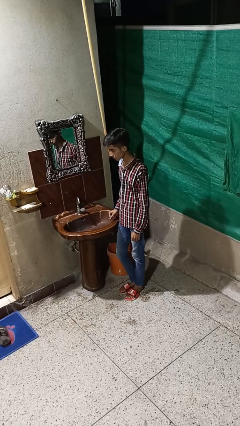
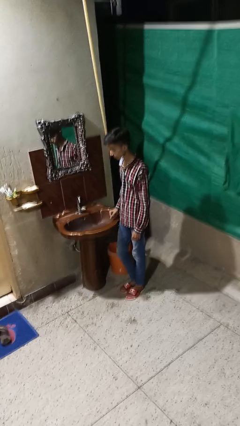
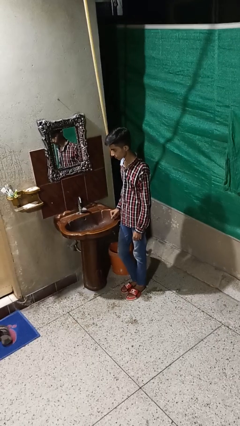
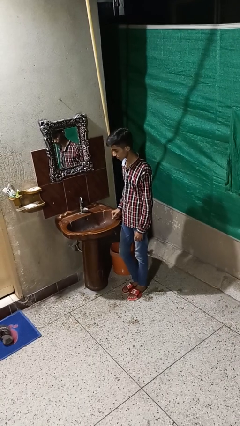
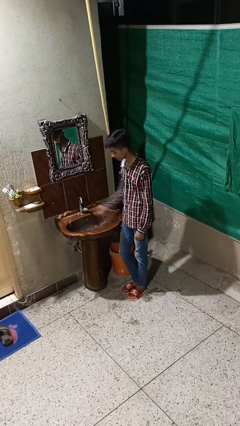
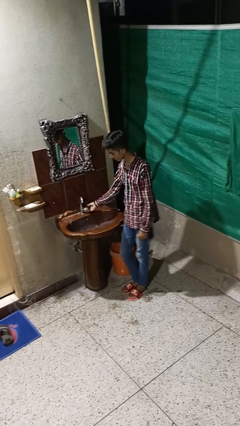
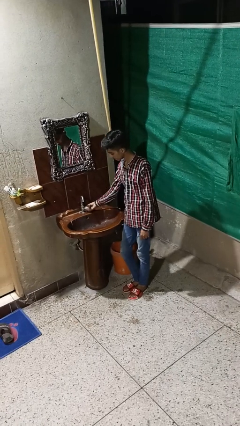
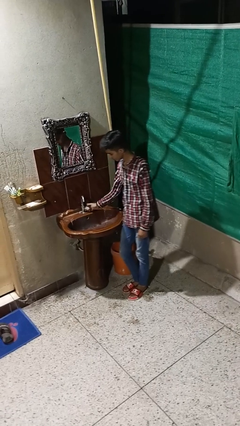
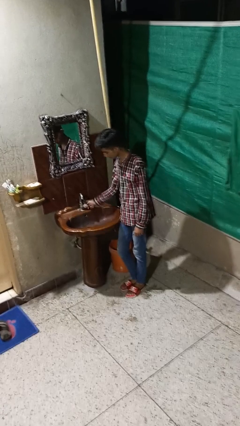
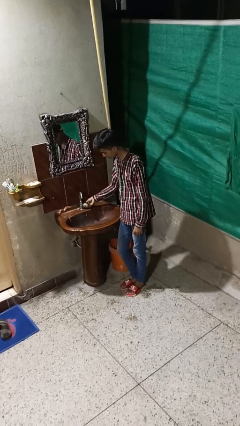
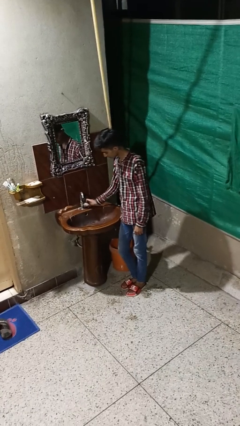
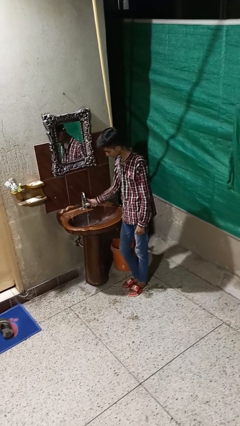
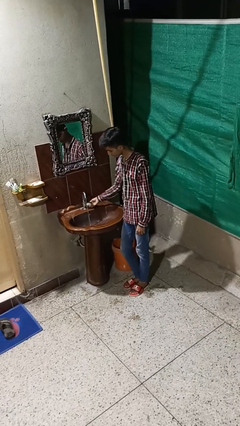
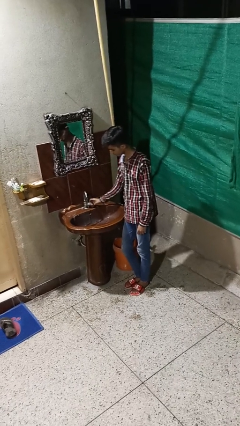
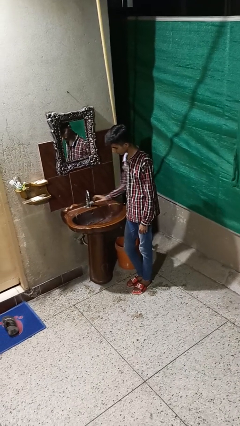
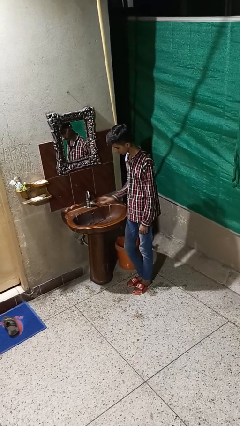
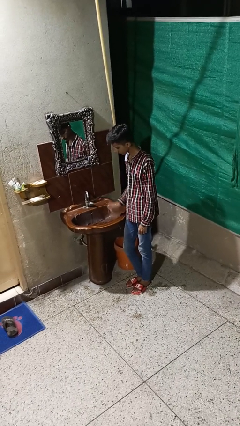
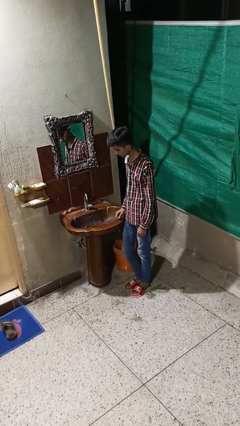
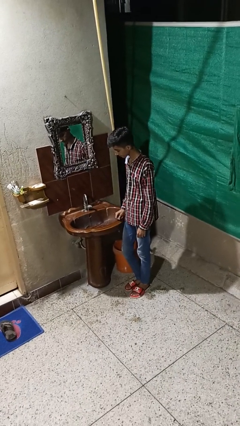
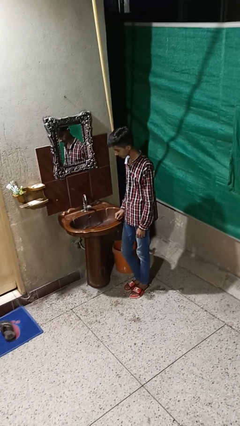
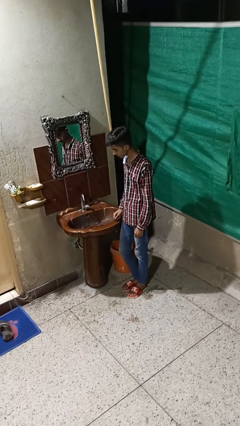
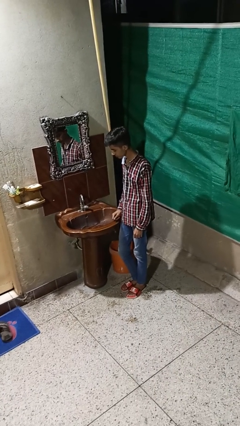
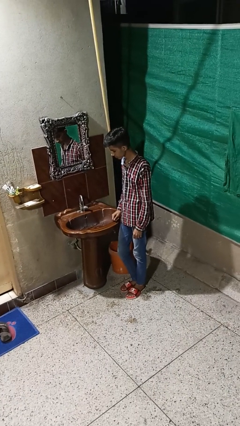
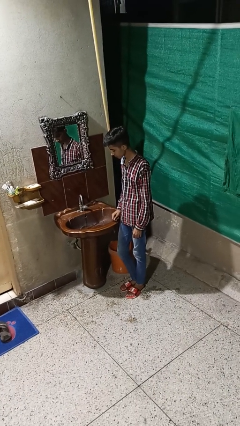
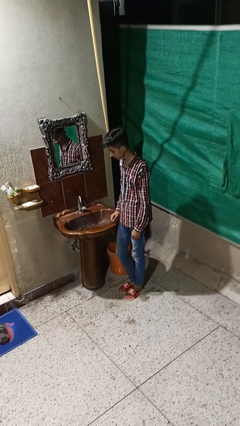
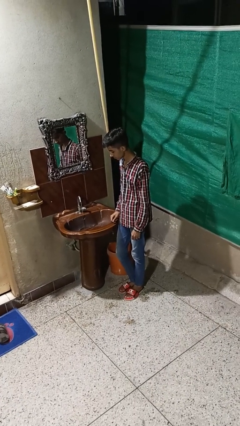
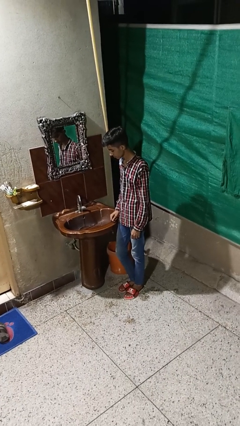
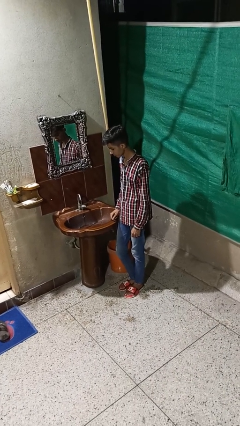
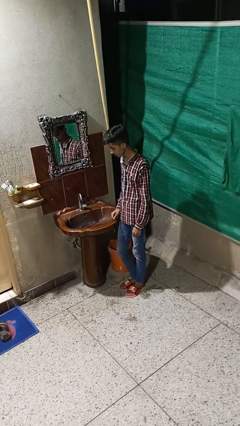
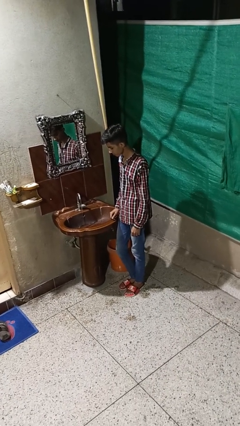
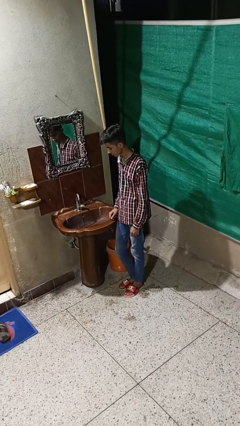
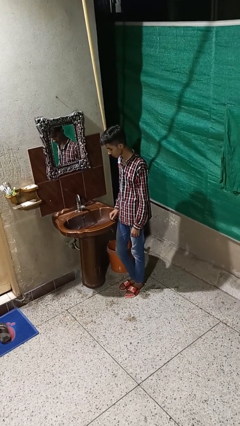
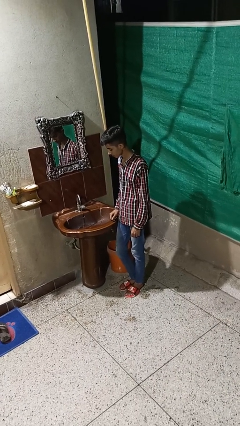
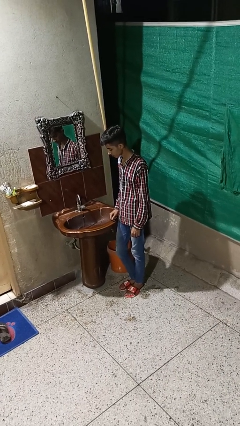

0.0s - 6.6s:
person turns on faucet

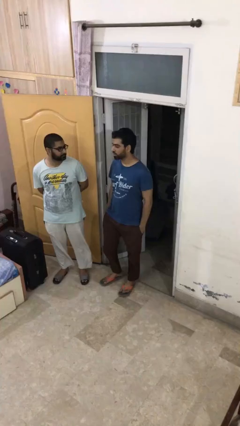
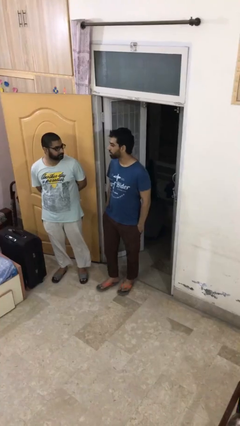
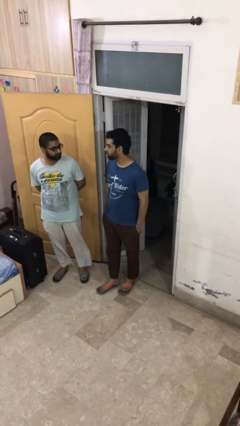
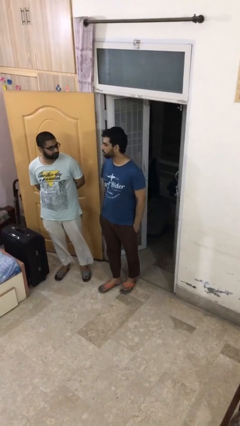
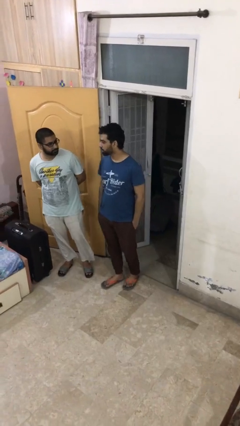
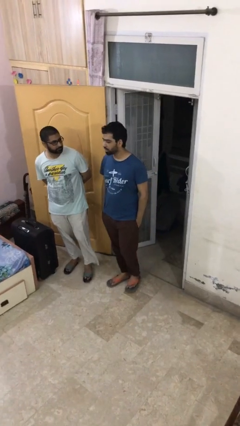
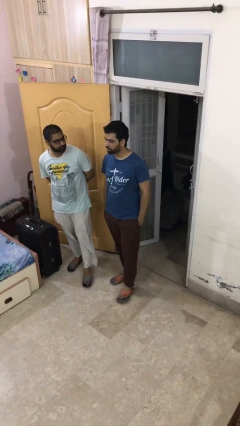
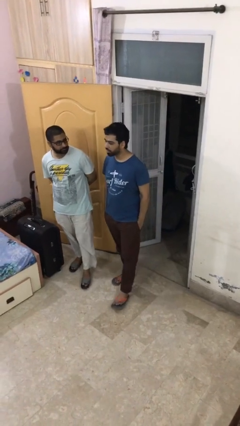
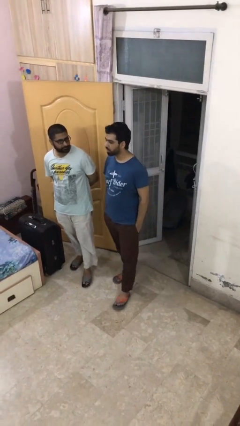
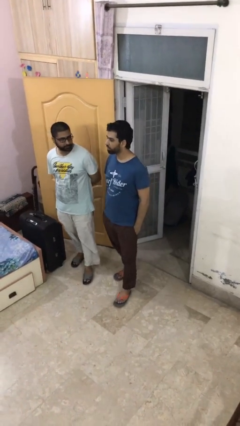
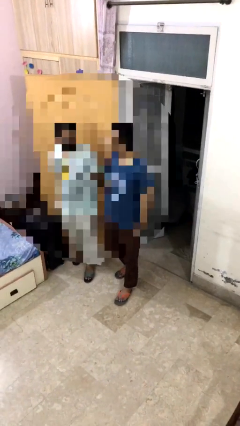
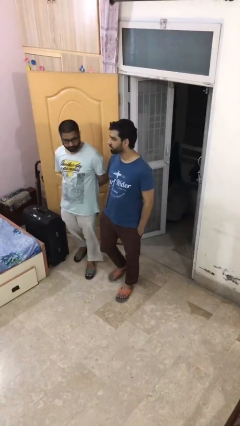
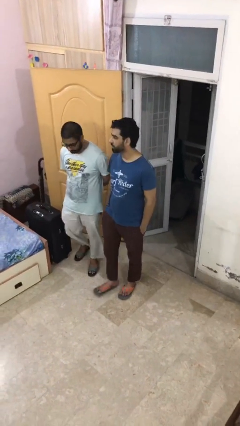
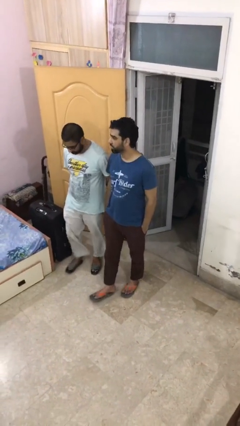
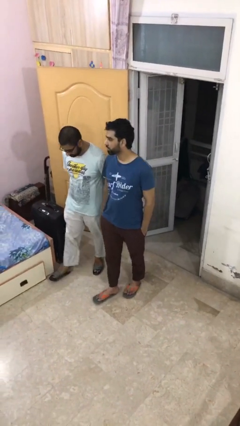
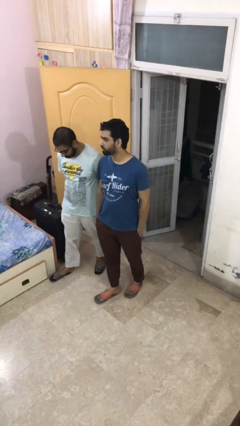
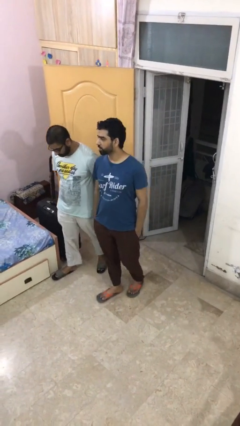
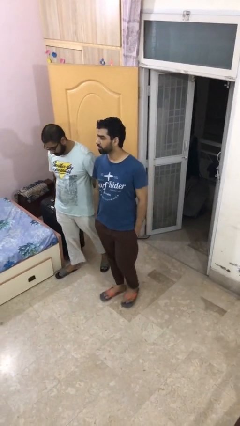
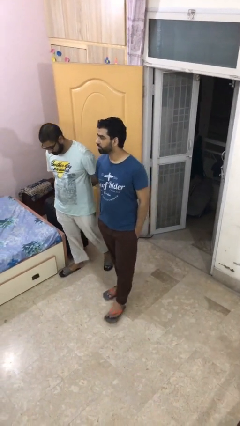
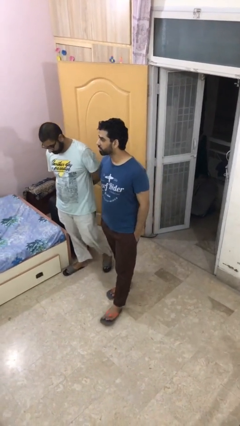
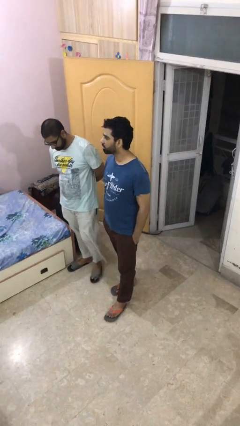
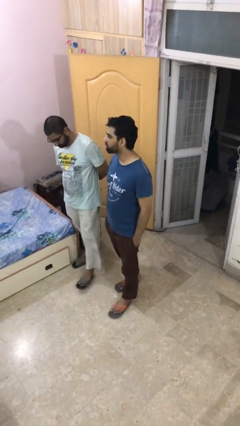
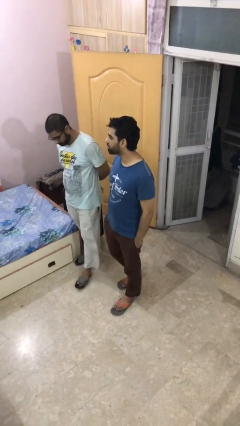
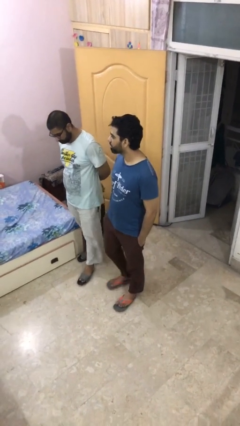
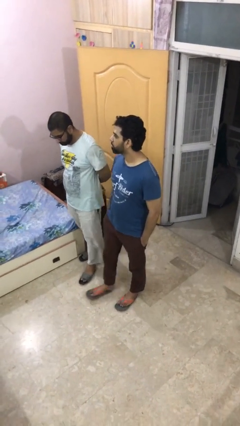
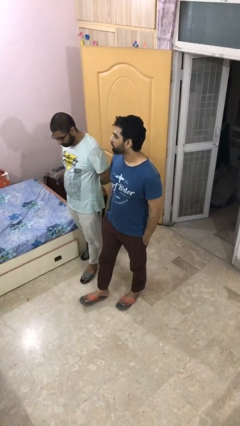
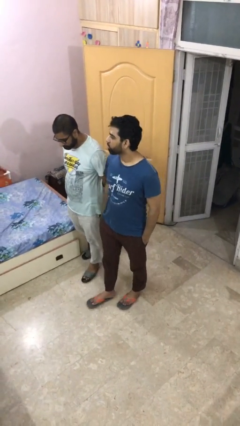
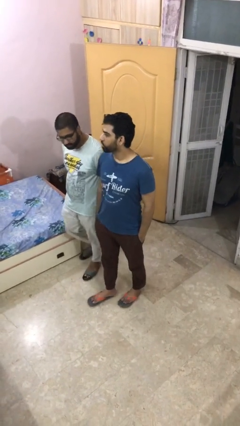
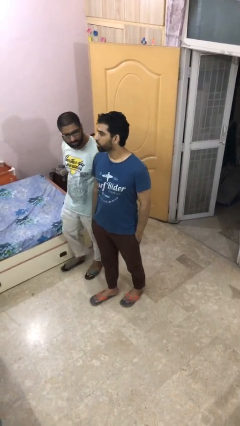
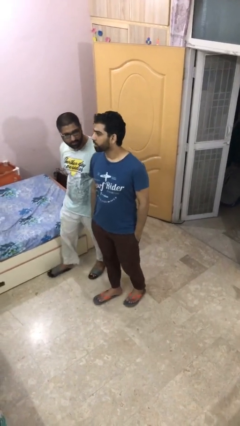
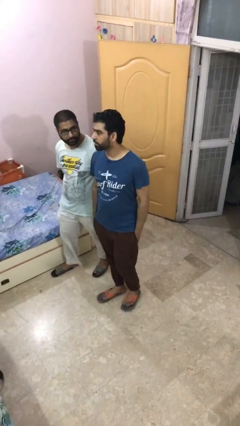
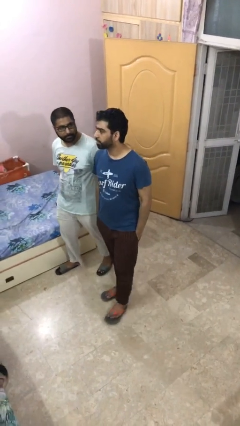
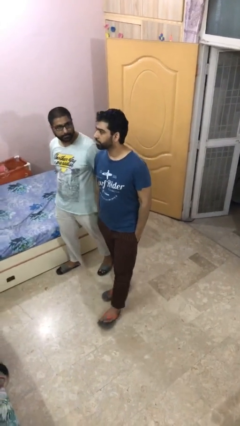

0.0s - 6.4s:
person talks to person

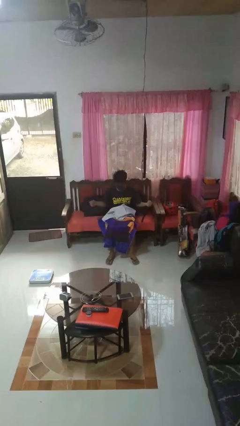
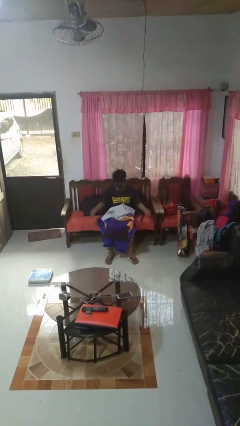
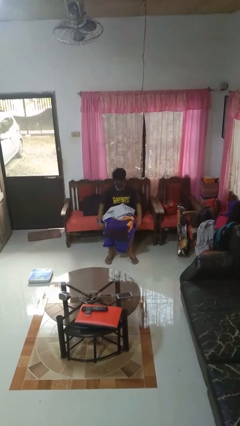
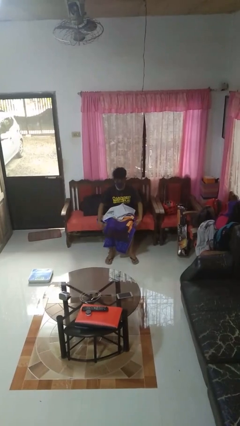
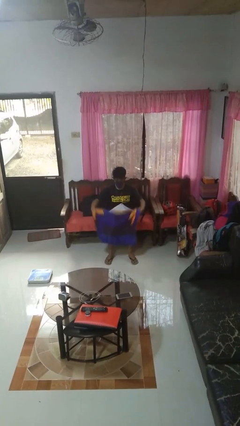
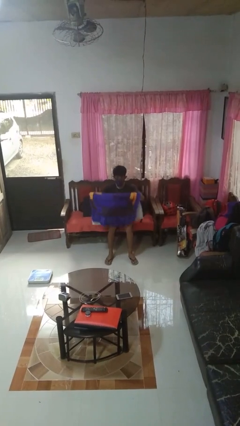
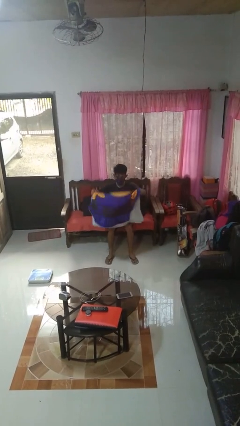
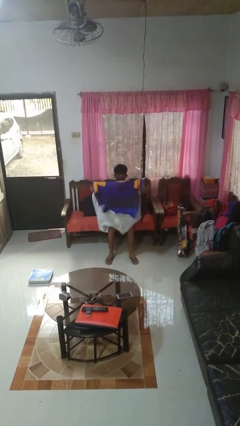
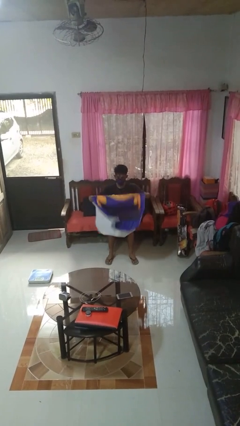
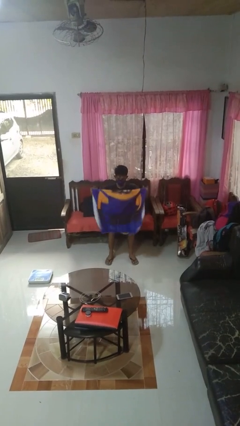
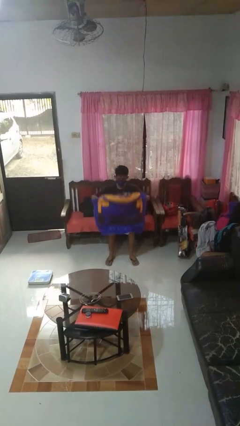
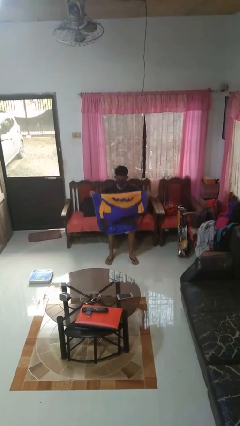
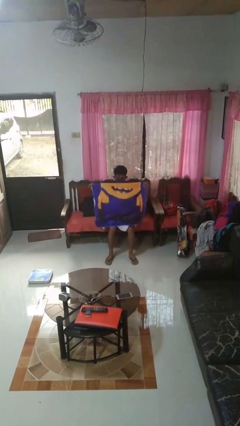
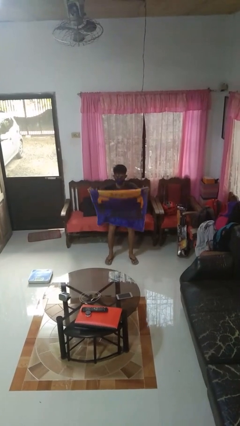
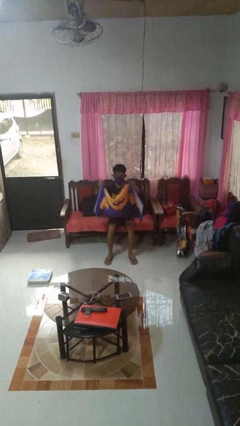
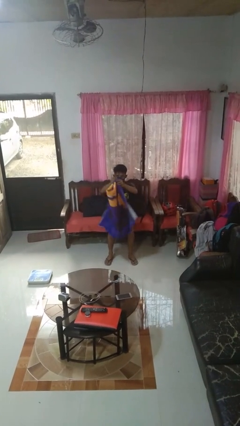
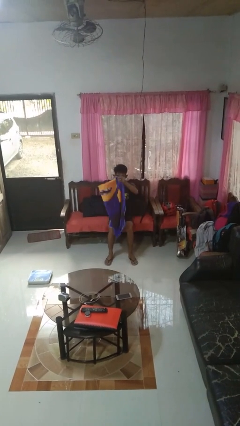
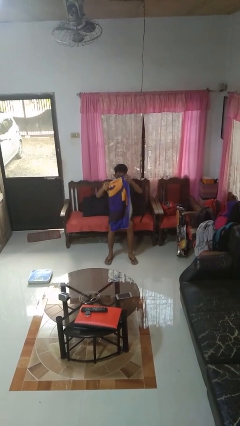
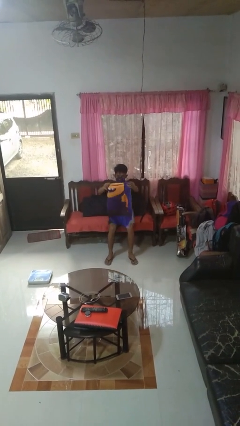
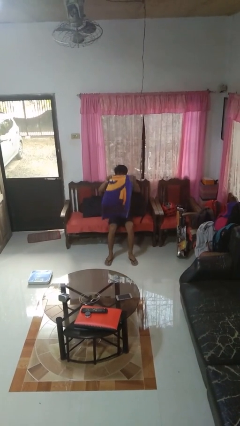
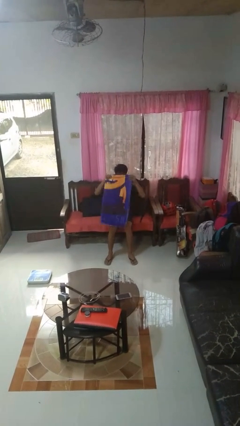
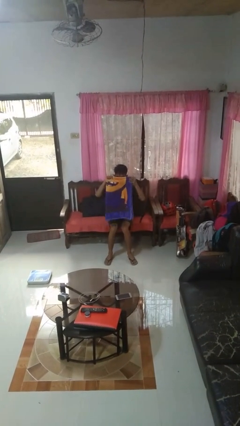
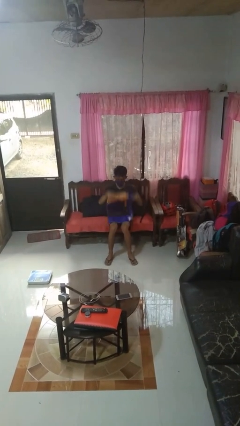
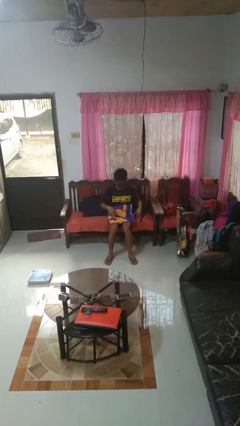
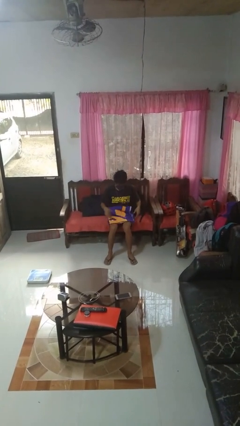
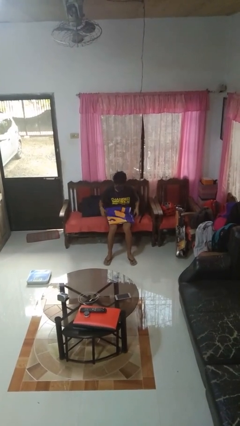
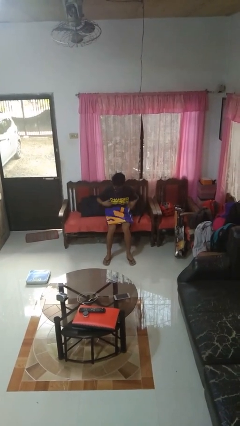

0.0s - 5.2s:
person folds towel
